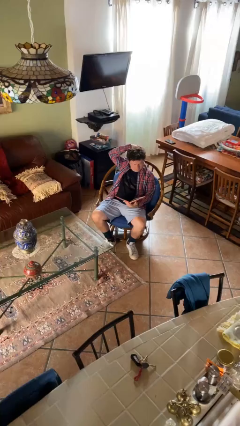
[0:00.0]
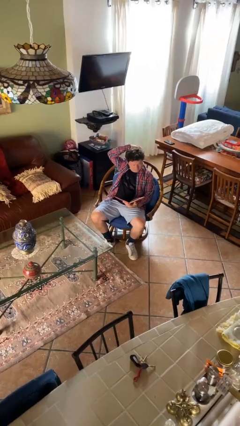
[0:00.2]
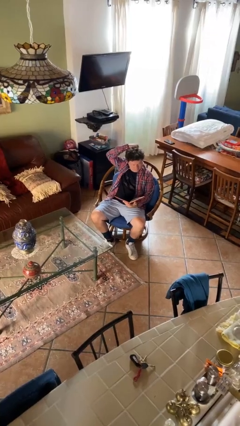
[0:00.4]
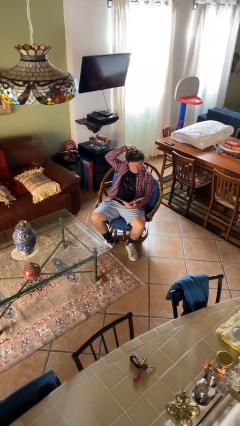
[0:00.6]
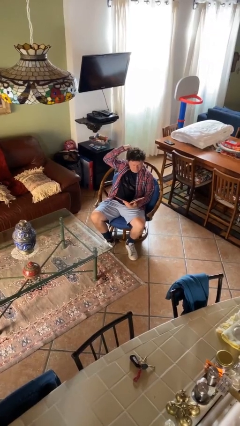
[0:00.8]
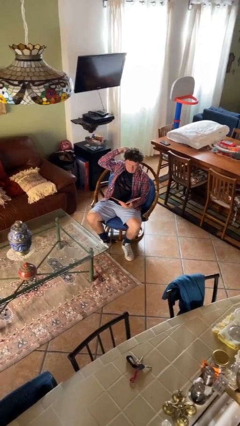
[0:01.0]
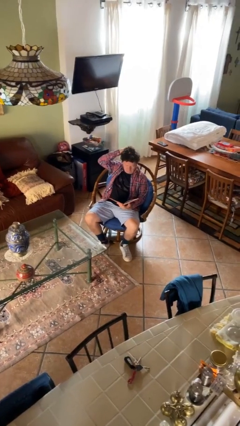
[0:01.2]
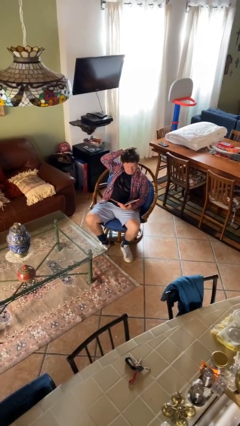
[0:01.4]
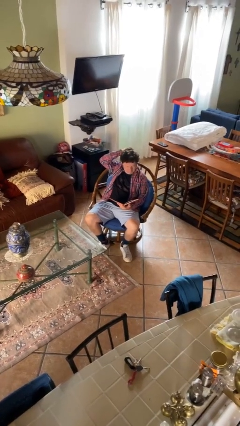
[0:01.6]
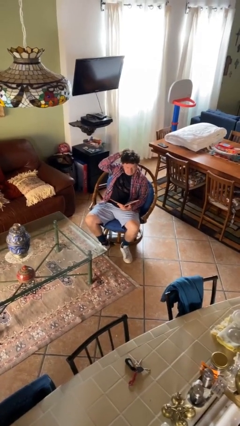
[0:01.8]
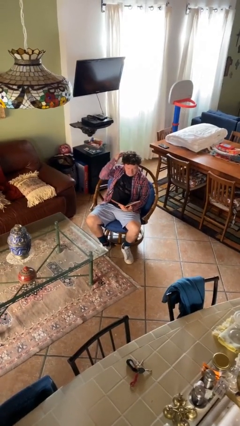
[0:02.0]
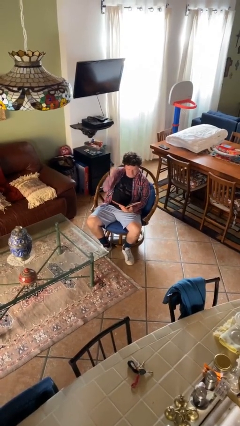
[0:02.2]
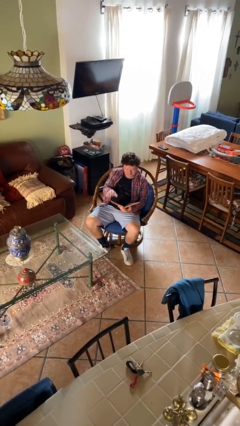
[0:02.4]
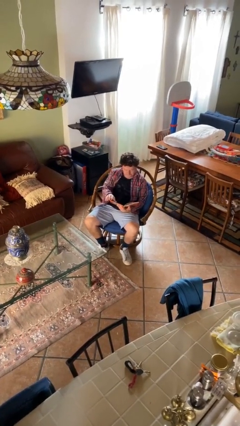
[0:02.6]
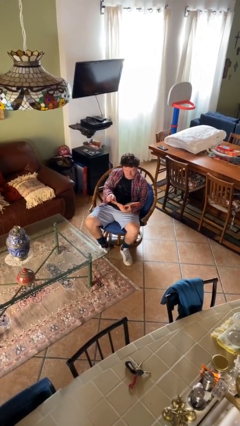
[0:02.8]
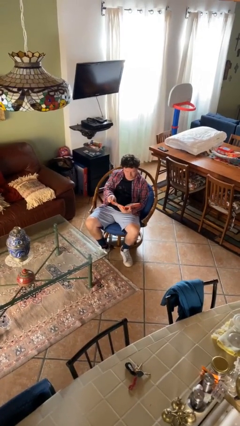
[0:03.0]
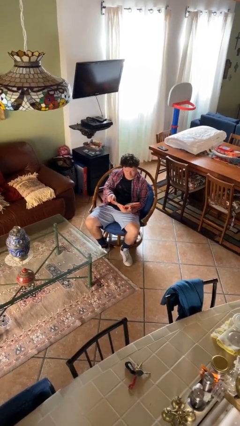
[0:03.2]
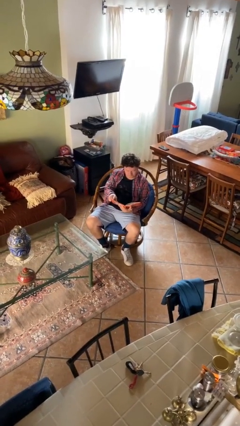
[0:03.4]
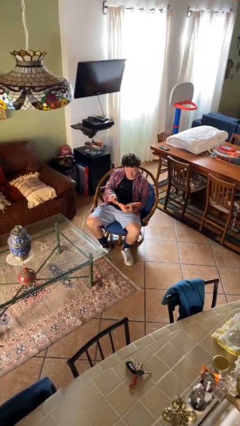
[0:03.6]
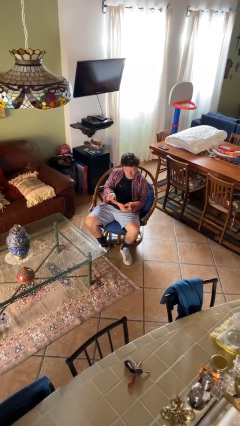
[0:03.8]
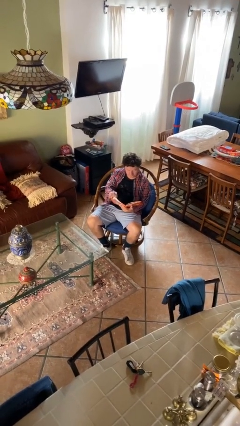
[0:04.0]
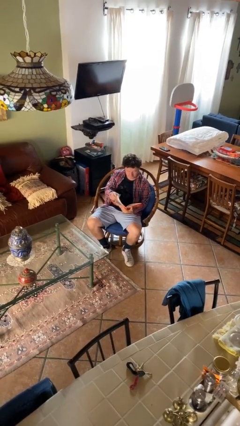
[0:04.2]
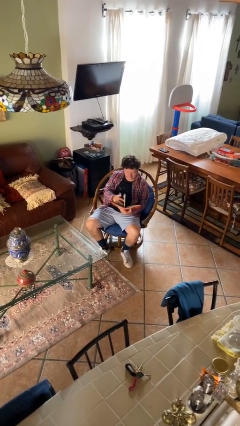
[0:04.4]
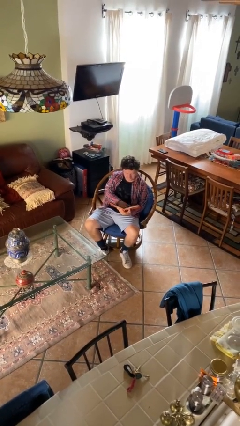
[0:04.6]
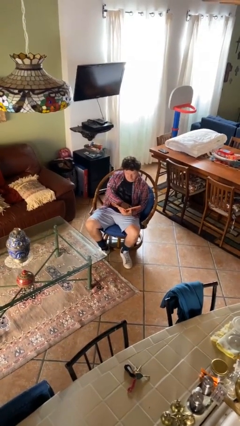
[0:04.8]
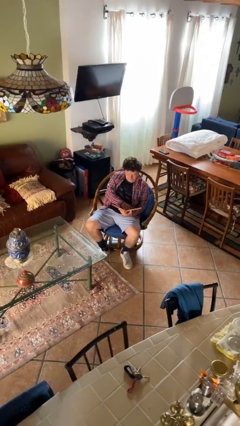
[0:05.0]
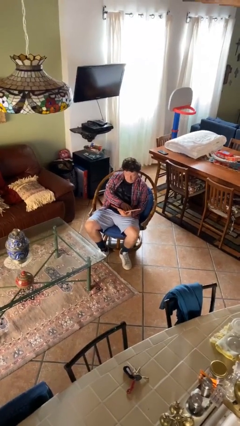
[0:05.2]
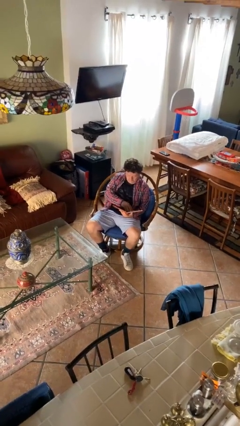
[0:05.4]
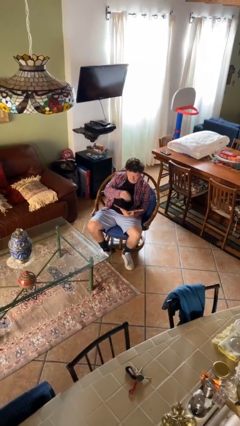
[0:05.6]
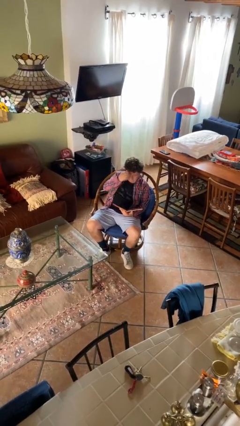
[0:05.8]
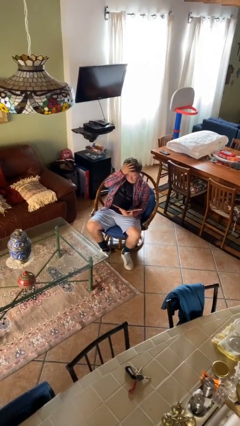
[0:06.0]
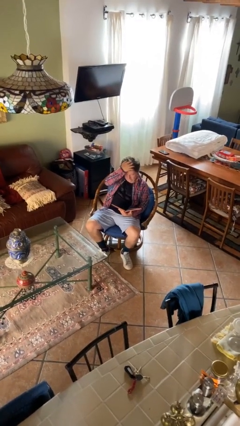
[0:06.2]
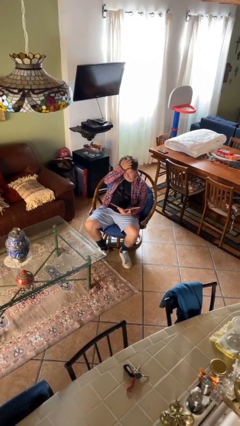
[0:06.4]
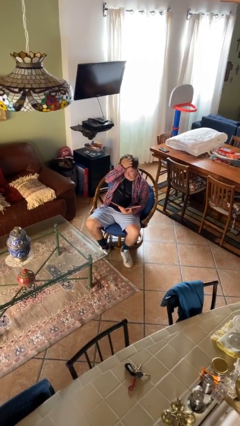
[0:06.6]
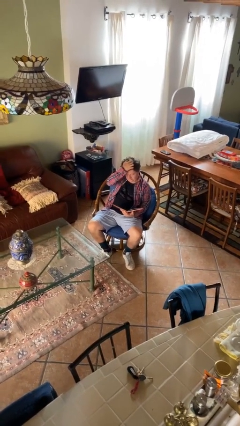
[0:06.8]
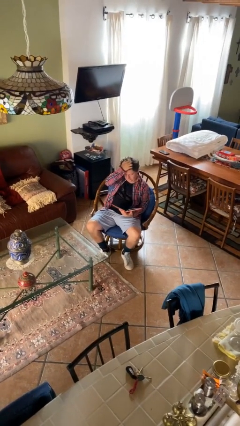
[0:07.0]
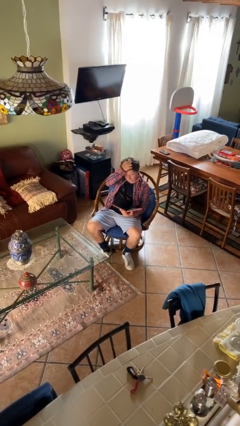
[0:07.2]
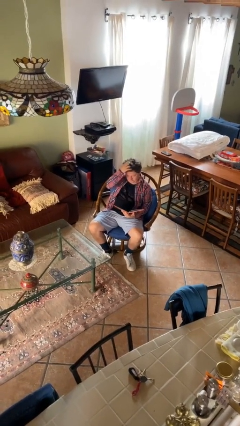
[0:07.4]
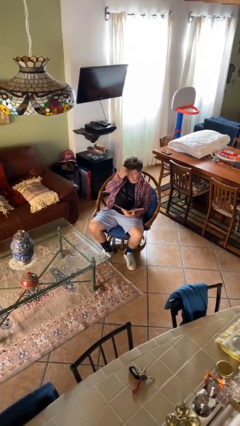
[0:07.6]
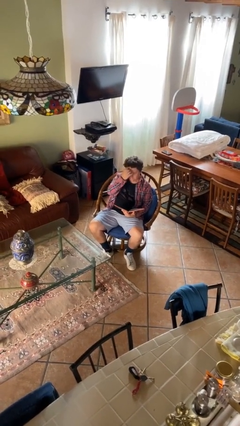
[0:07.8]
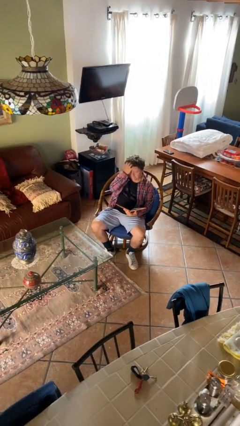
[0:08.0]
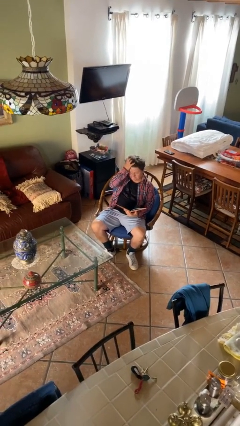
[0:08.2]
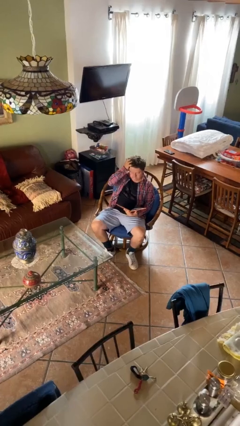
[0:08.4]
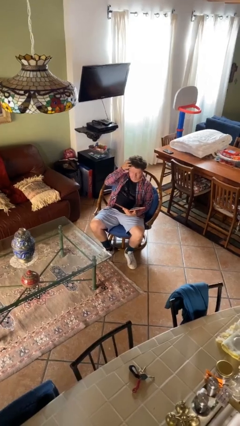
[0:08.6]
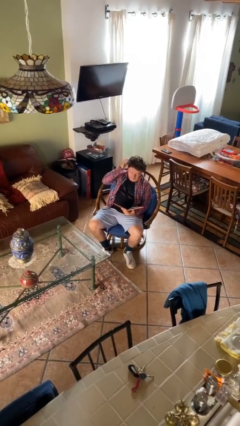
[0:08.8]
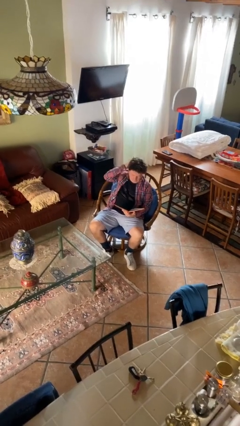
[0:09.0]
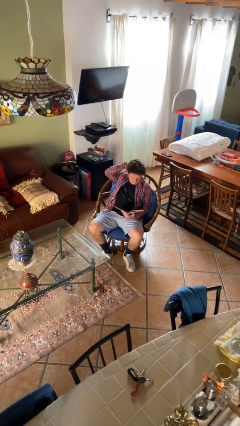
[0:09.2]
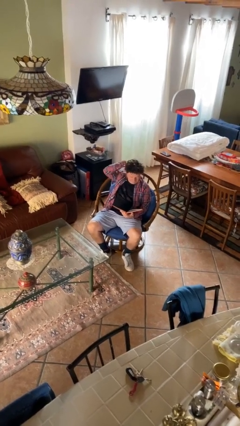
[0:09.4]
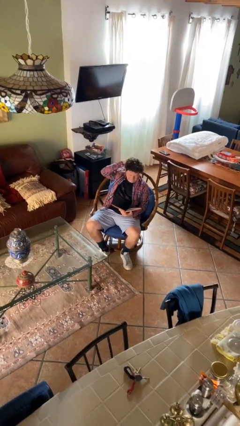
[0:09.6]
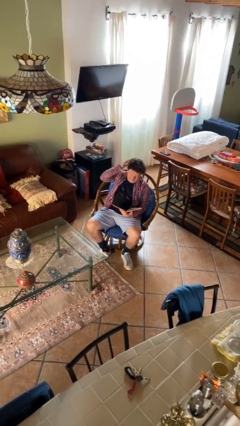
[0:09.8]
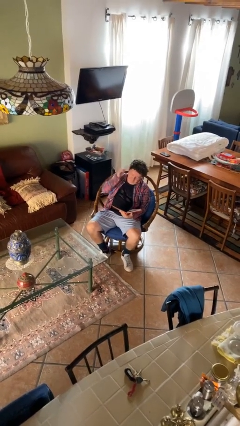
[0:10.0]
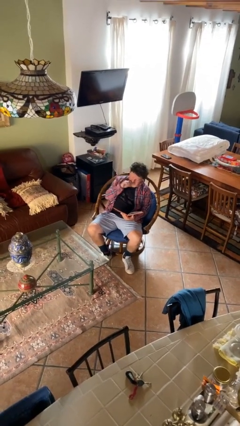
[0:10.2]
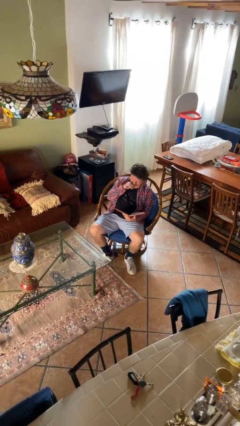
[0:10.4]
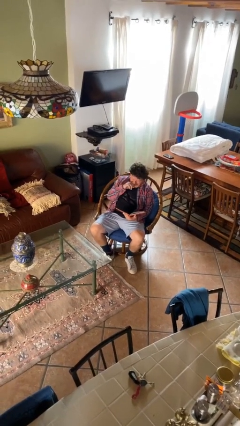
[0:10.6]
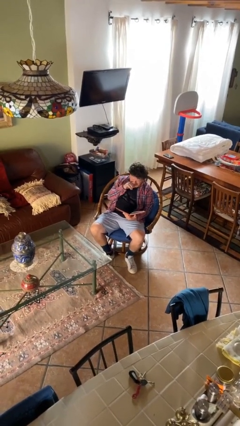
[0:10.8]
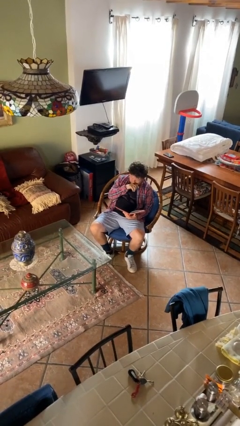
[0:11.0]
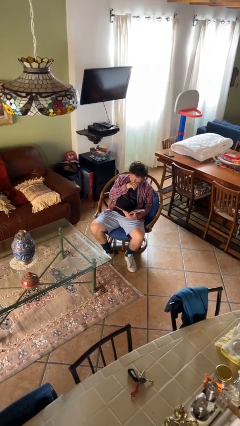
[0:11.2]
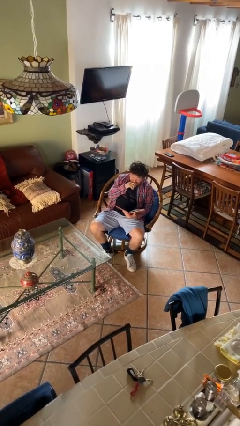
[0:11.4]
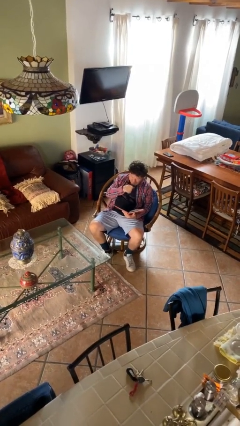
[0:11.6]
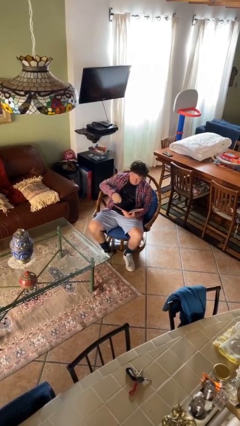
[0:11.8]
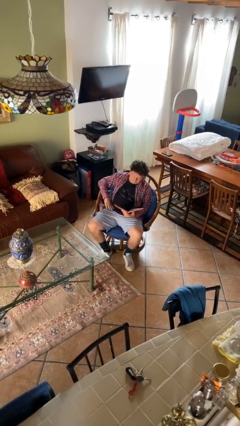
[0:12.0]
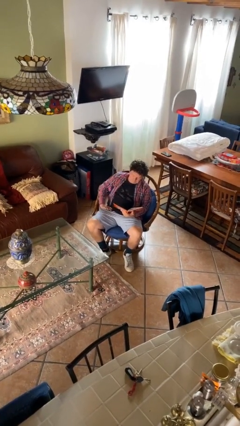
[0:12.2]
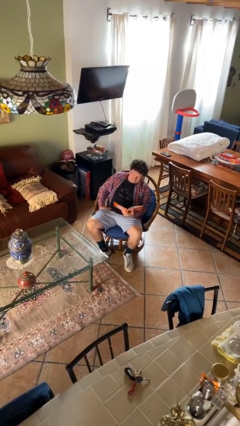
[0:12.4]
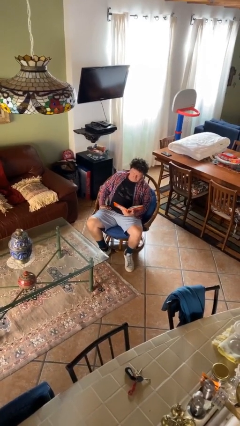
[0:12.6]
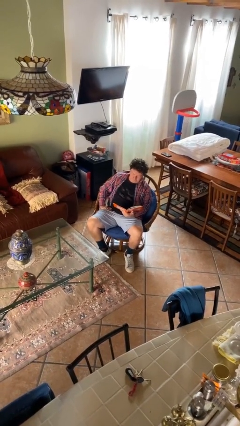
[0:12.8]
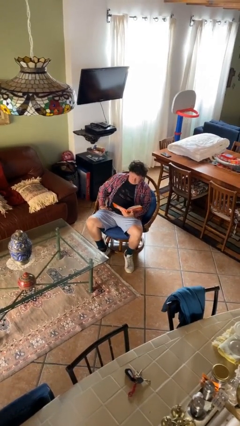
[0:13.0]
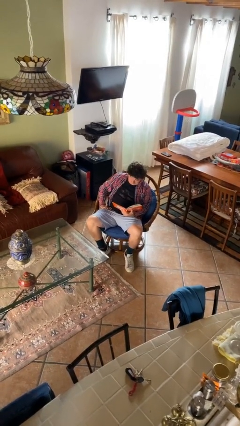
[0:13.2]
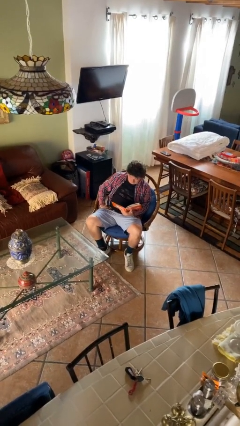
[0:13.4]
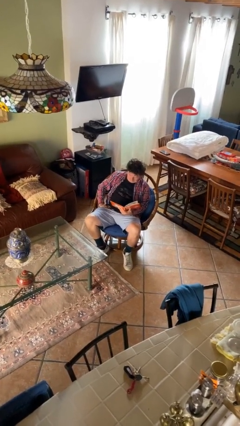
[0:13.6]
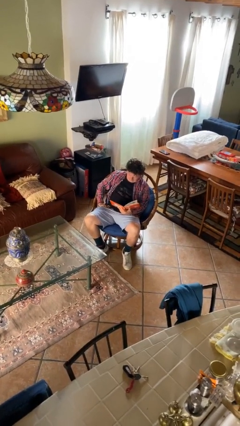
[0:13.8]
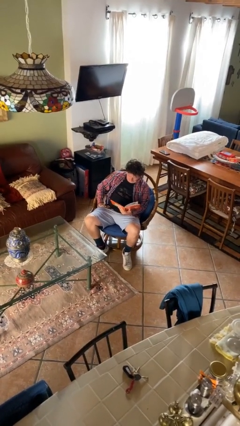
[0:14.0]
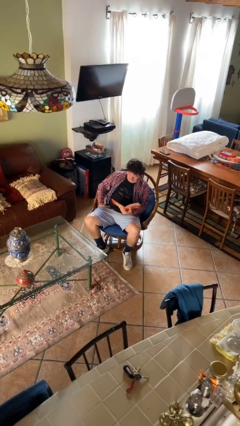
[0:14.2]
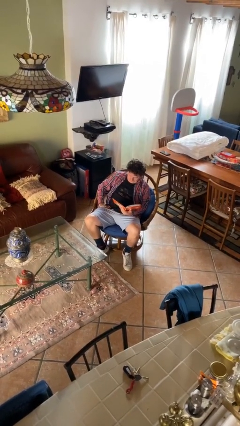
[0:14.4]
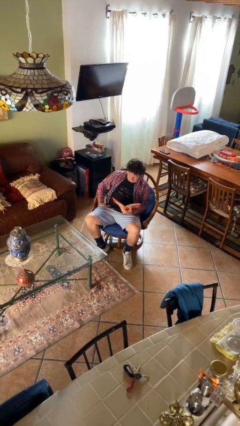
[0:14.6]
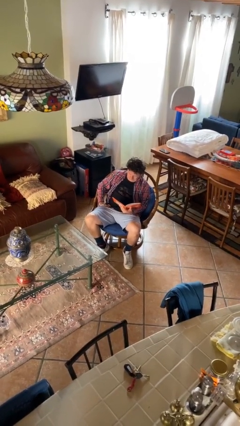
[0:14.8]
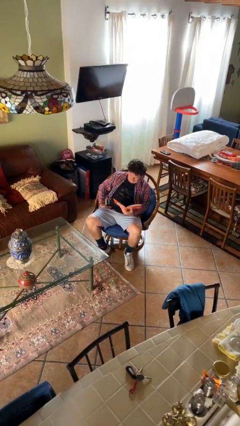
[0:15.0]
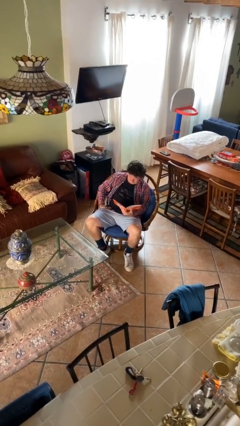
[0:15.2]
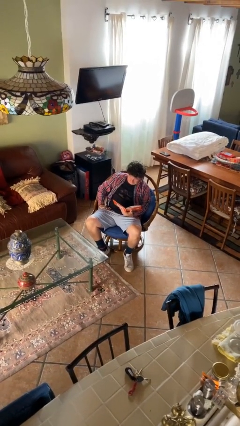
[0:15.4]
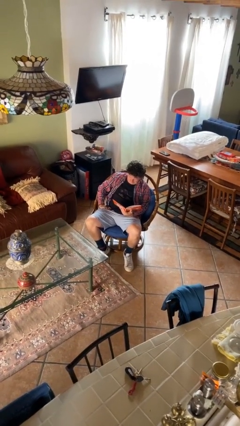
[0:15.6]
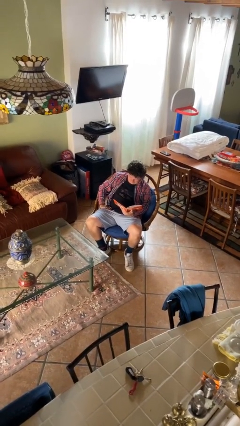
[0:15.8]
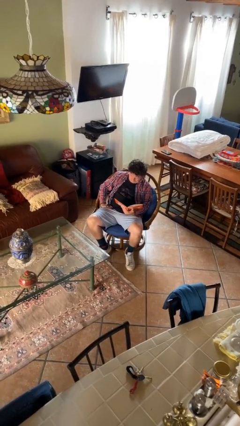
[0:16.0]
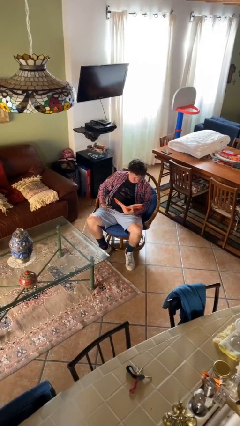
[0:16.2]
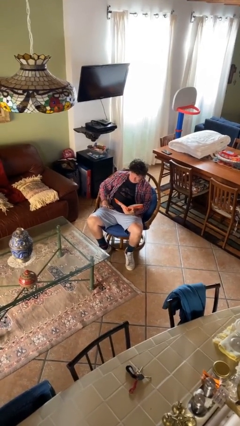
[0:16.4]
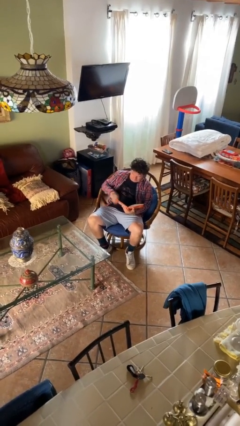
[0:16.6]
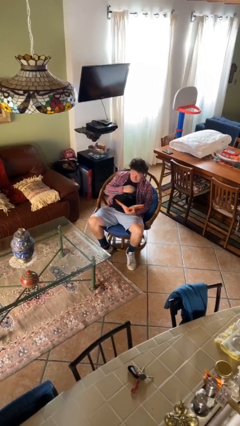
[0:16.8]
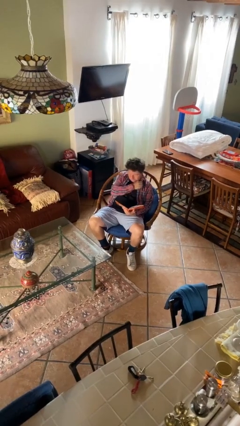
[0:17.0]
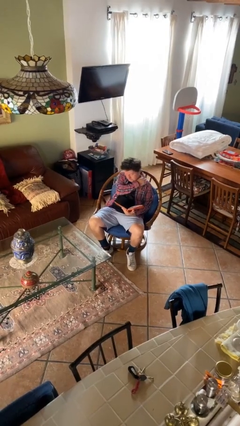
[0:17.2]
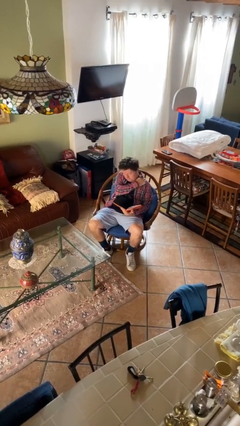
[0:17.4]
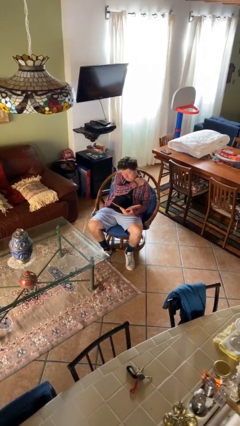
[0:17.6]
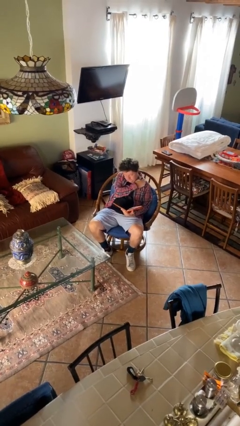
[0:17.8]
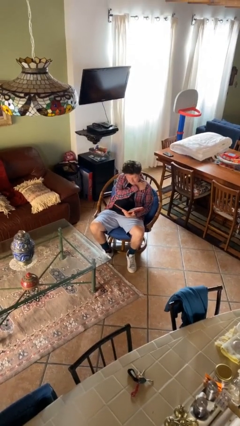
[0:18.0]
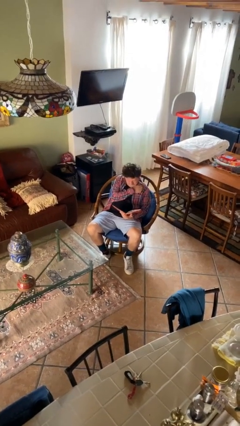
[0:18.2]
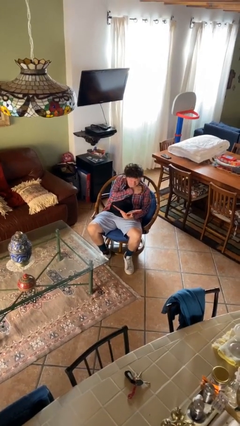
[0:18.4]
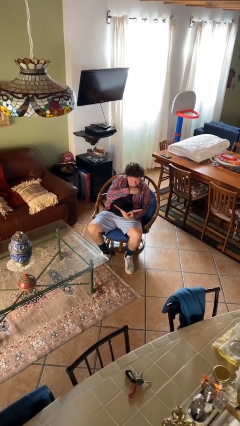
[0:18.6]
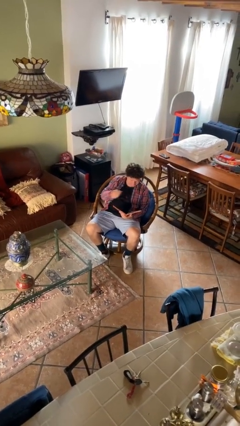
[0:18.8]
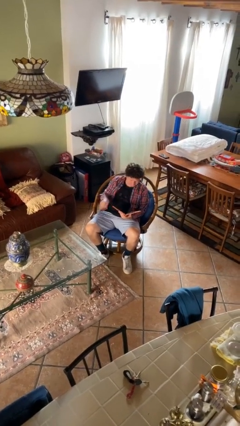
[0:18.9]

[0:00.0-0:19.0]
person reads document
